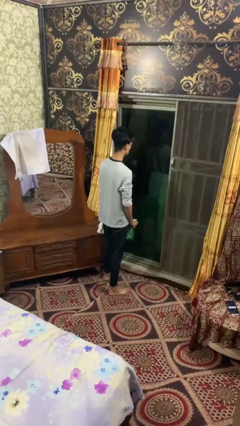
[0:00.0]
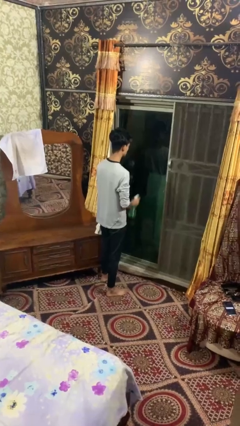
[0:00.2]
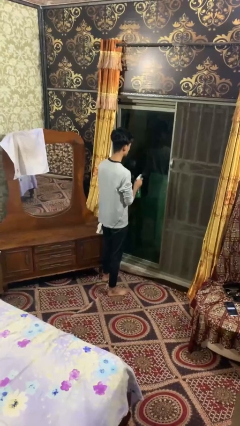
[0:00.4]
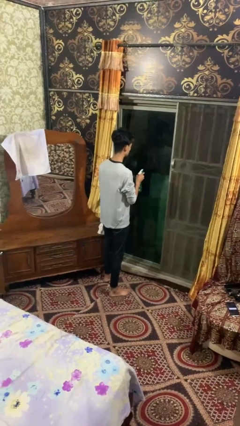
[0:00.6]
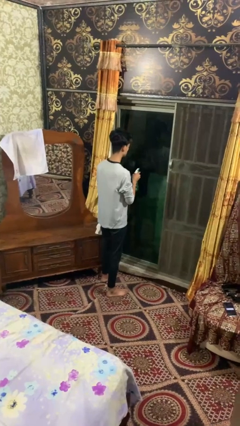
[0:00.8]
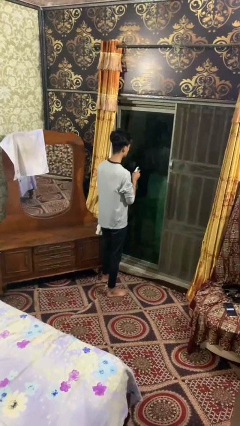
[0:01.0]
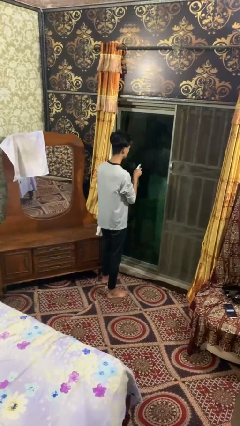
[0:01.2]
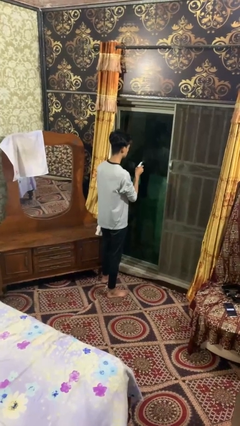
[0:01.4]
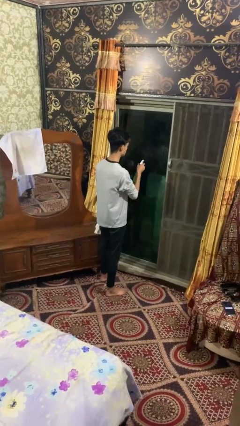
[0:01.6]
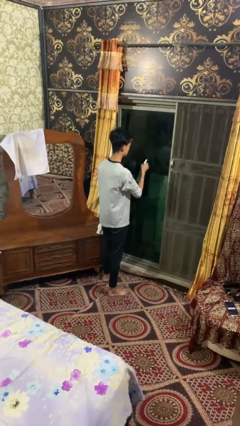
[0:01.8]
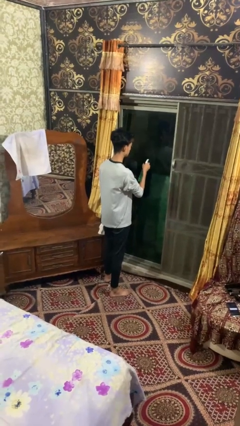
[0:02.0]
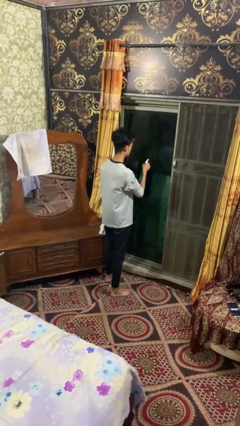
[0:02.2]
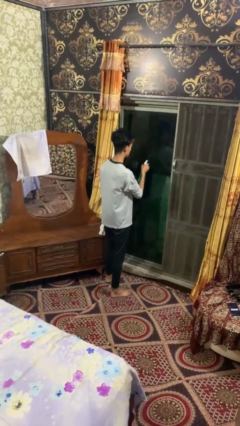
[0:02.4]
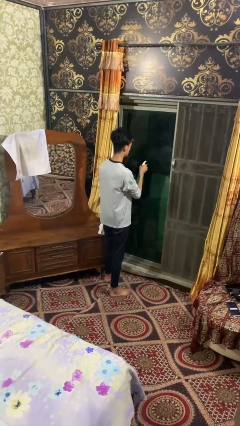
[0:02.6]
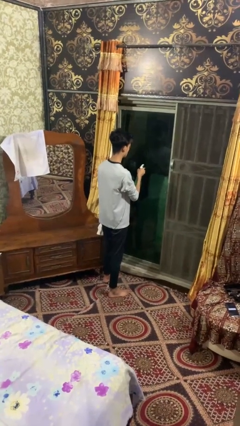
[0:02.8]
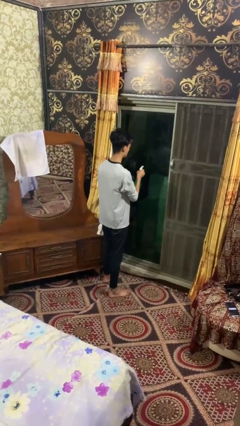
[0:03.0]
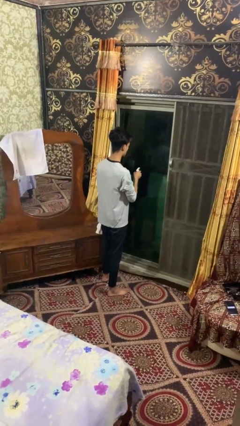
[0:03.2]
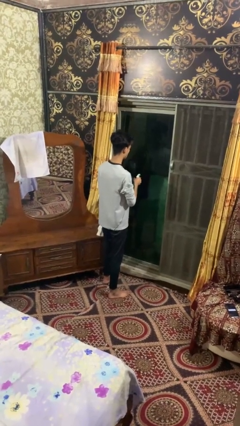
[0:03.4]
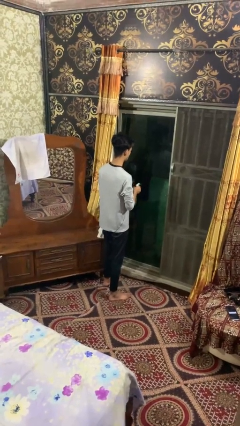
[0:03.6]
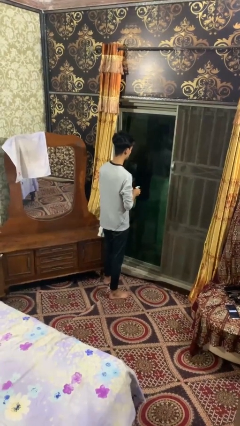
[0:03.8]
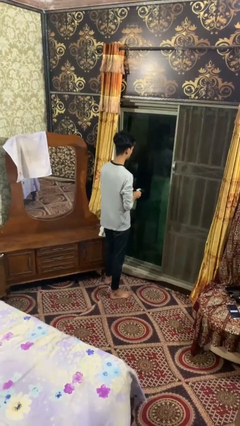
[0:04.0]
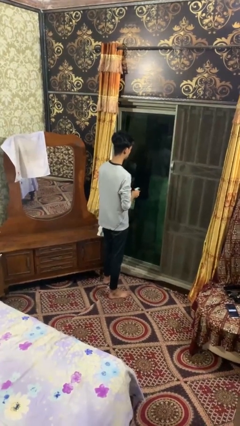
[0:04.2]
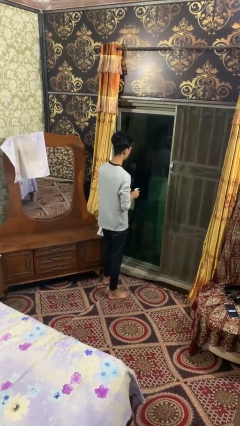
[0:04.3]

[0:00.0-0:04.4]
person sprays from bottle

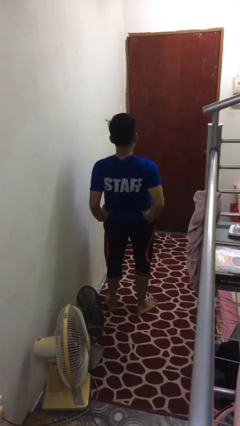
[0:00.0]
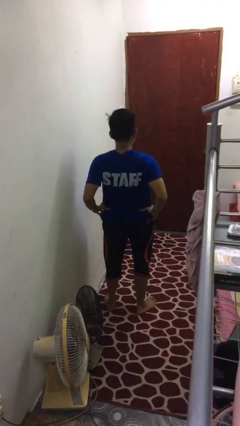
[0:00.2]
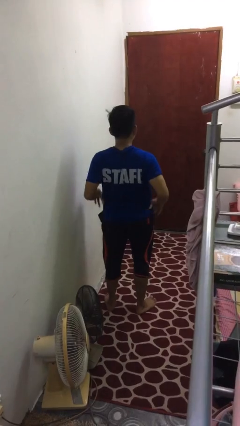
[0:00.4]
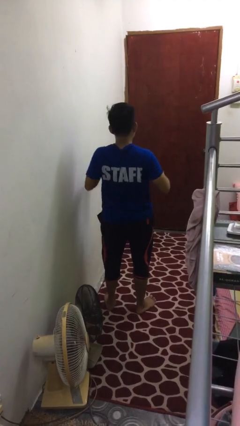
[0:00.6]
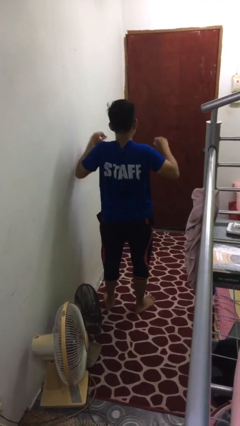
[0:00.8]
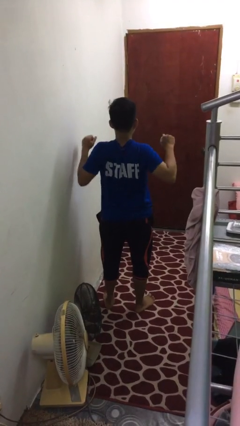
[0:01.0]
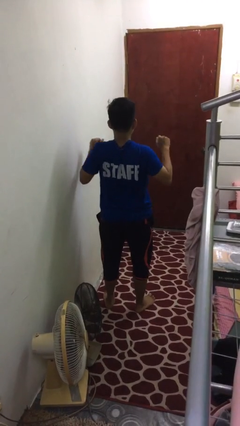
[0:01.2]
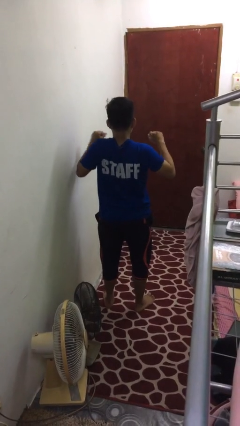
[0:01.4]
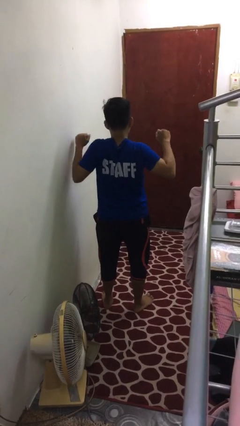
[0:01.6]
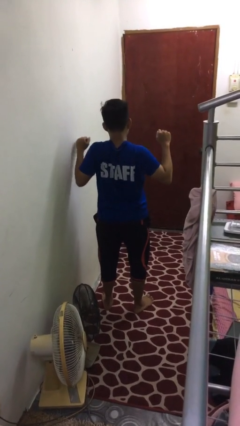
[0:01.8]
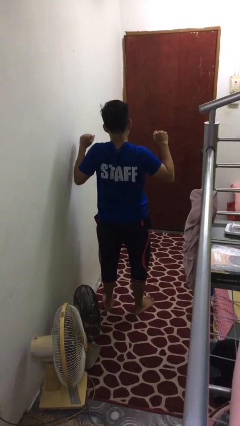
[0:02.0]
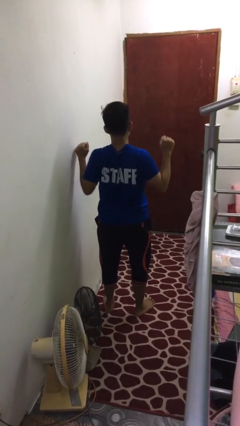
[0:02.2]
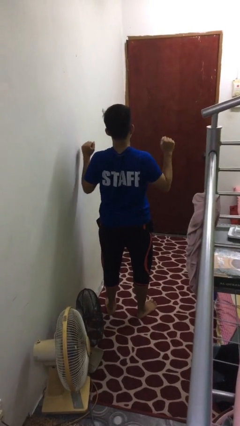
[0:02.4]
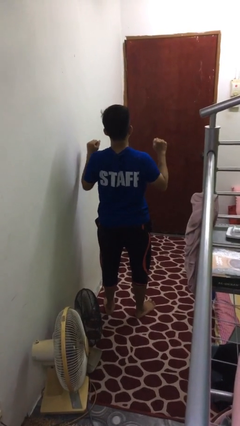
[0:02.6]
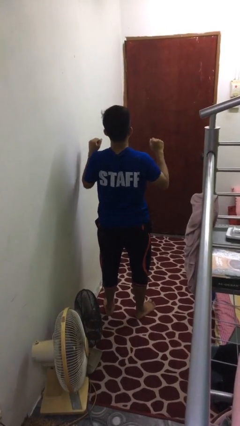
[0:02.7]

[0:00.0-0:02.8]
person stretches arms to side

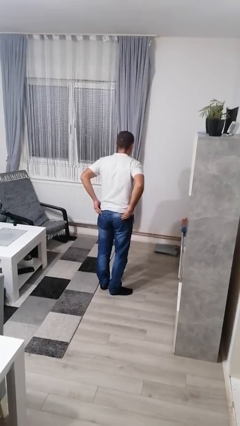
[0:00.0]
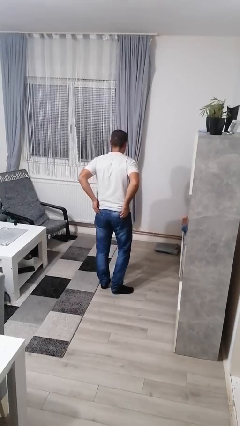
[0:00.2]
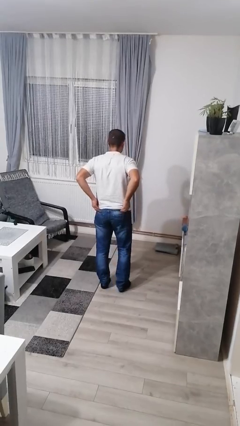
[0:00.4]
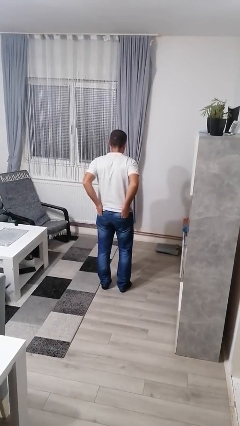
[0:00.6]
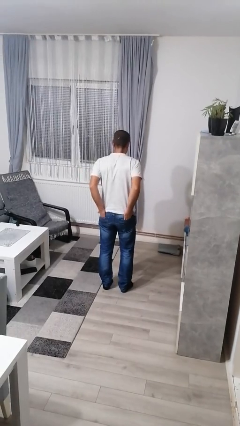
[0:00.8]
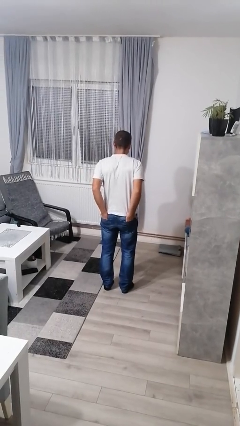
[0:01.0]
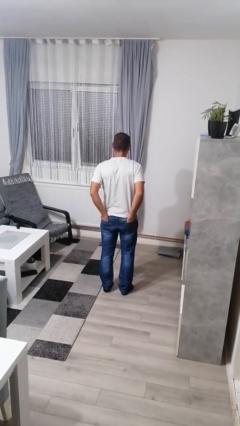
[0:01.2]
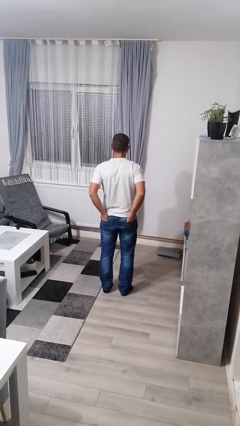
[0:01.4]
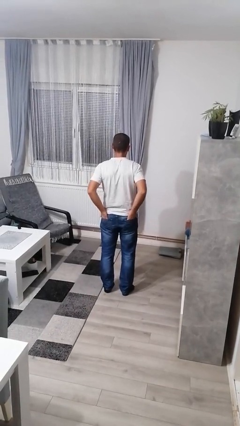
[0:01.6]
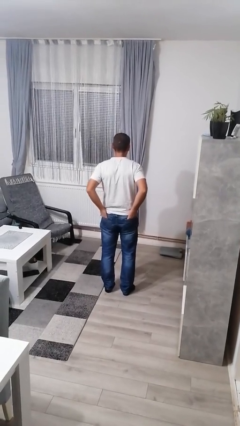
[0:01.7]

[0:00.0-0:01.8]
person puts hands in back pockets

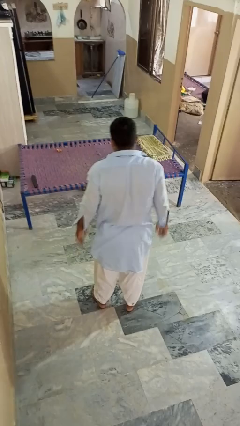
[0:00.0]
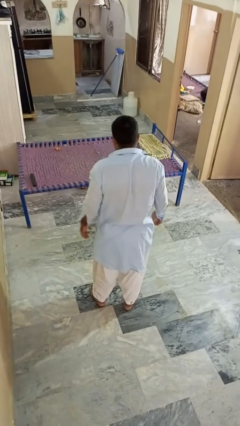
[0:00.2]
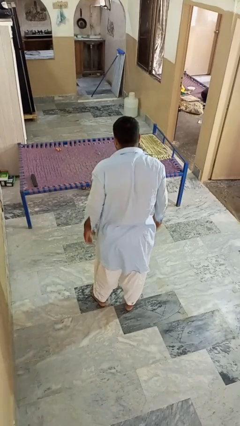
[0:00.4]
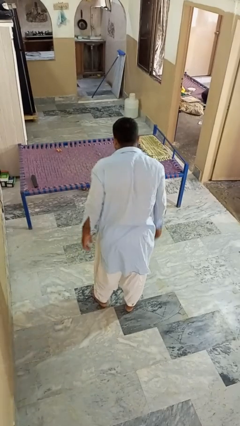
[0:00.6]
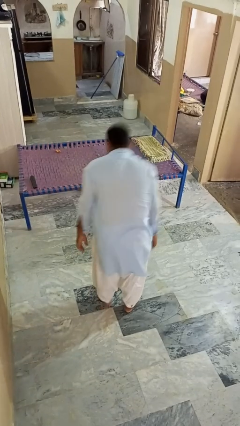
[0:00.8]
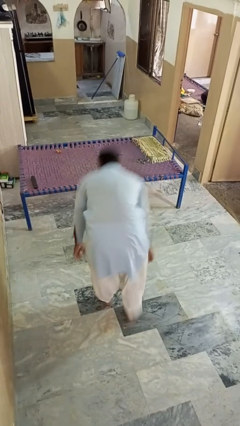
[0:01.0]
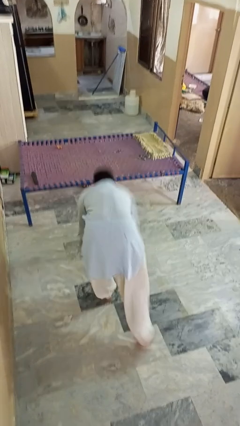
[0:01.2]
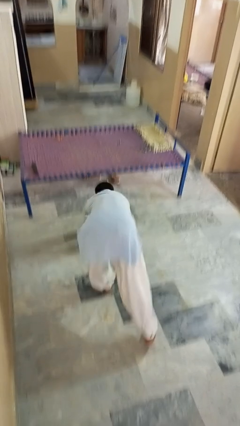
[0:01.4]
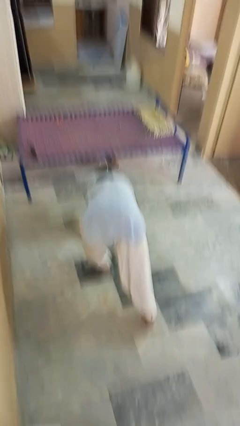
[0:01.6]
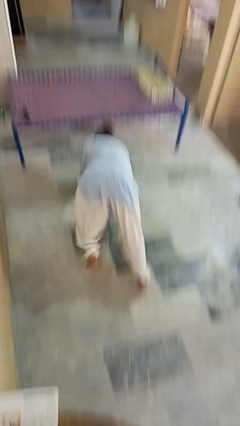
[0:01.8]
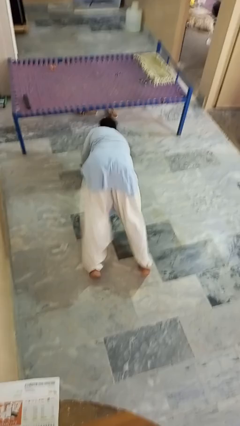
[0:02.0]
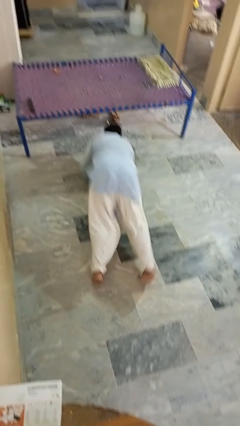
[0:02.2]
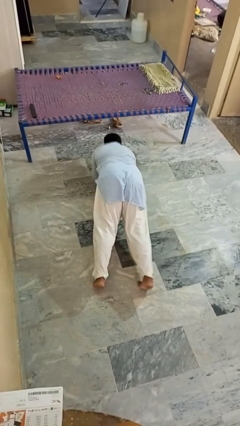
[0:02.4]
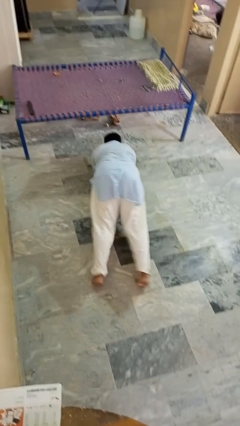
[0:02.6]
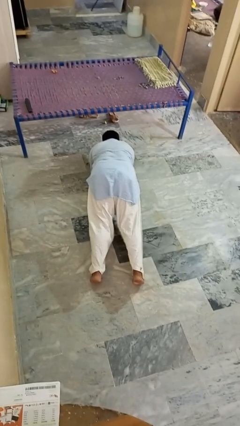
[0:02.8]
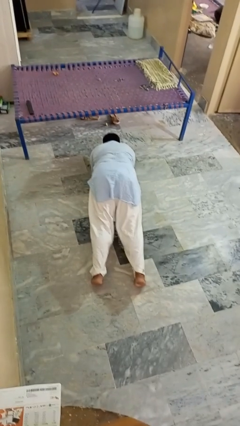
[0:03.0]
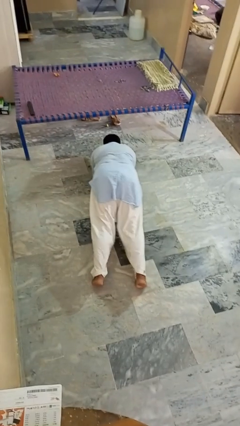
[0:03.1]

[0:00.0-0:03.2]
person exercises with plank

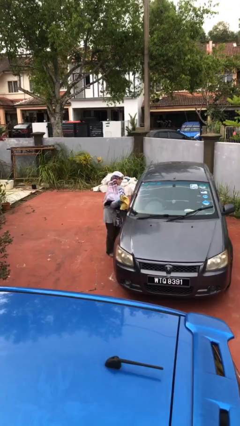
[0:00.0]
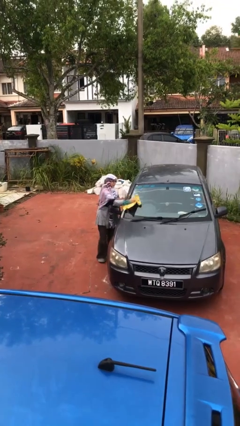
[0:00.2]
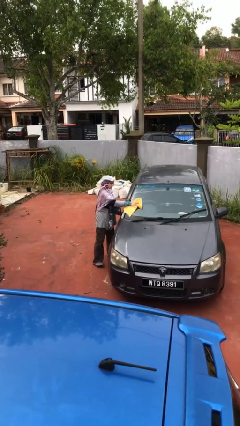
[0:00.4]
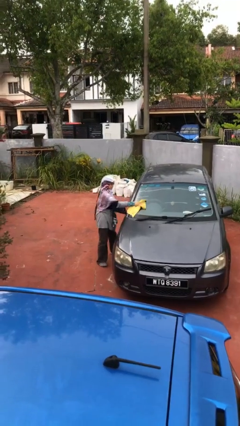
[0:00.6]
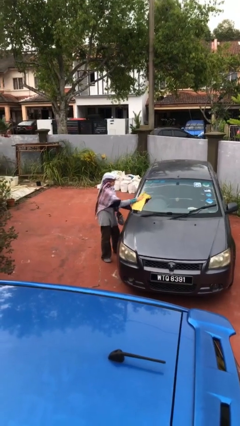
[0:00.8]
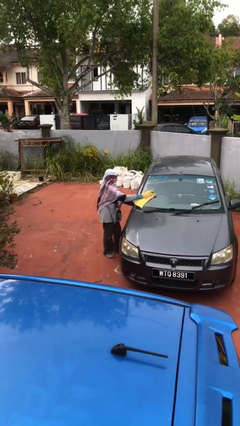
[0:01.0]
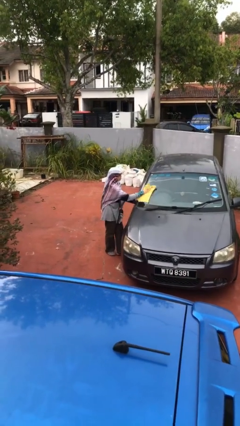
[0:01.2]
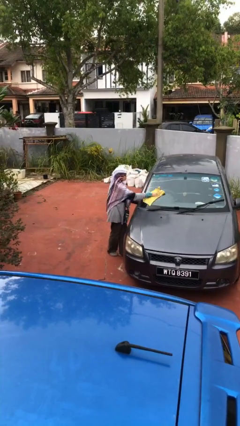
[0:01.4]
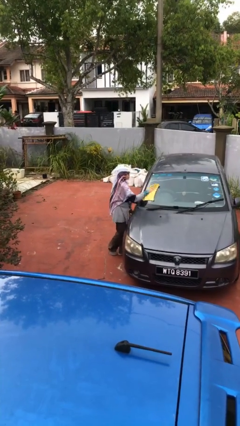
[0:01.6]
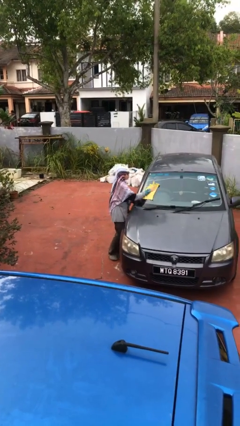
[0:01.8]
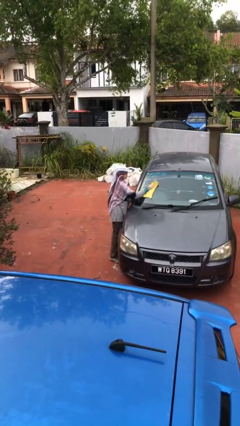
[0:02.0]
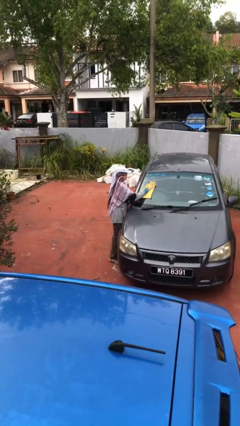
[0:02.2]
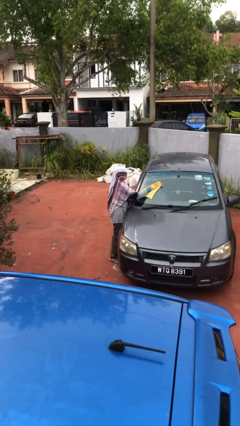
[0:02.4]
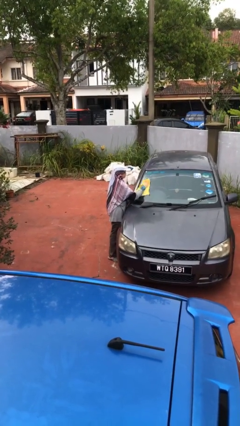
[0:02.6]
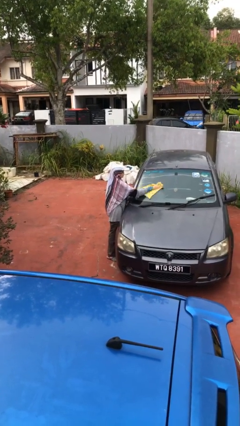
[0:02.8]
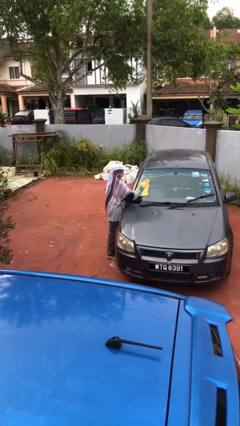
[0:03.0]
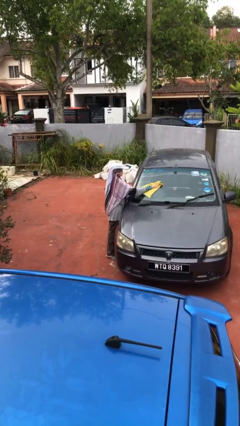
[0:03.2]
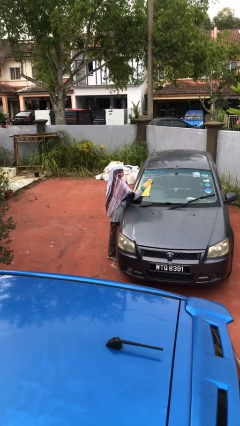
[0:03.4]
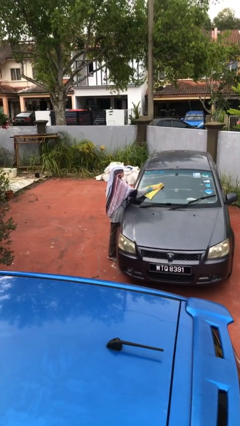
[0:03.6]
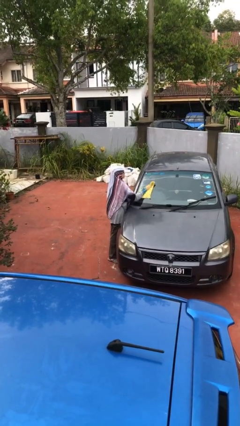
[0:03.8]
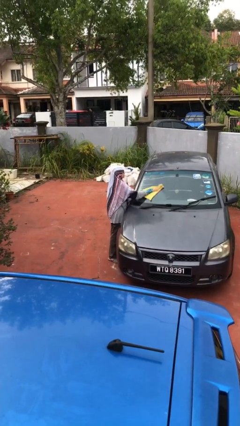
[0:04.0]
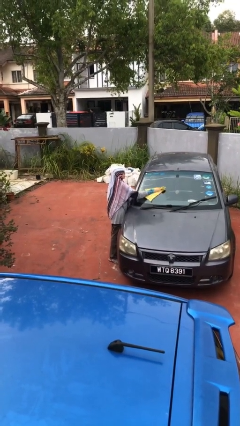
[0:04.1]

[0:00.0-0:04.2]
person polishes car with rag

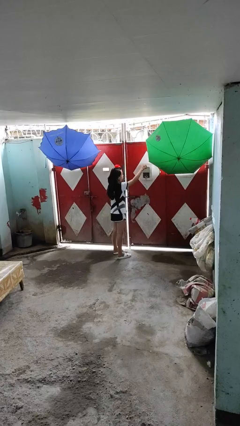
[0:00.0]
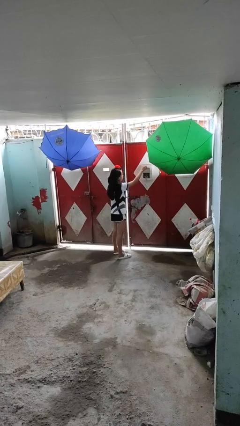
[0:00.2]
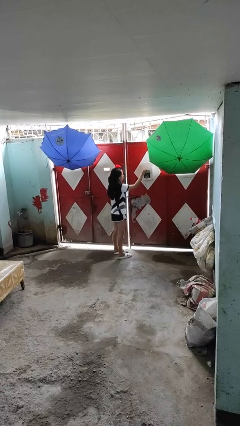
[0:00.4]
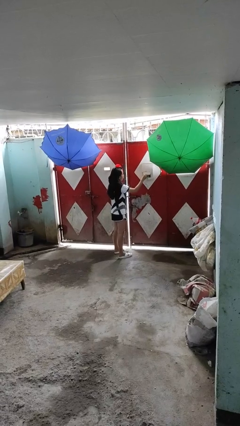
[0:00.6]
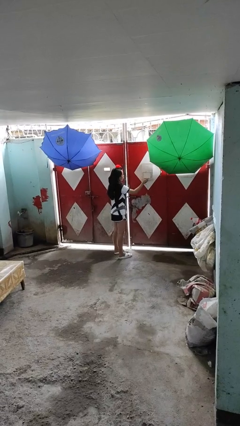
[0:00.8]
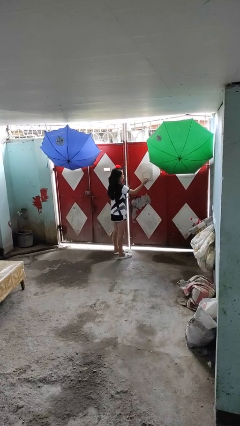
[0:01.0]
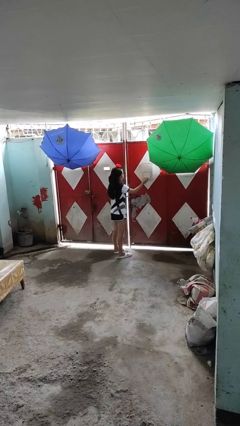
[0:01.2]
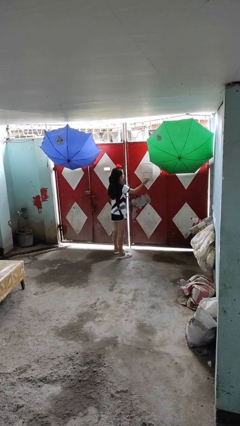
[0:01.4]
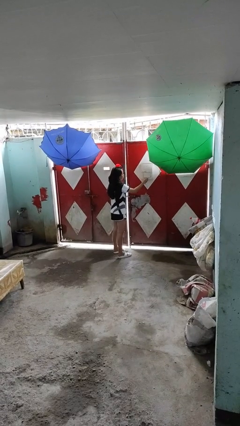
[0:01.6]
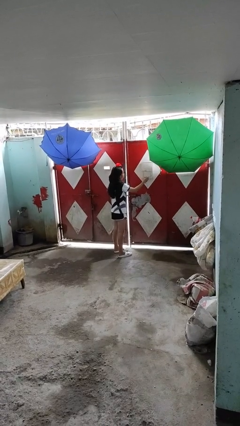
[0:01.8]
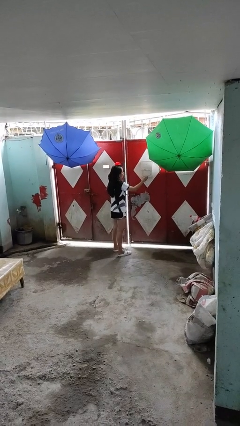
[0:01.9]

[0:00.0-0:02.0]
person closes mailbox
